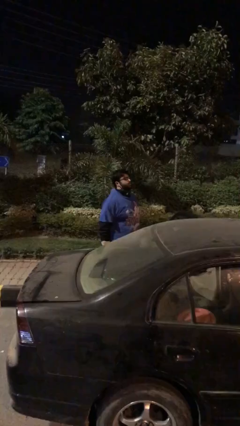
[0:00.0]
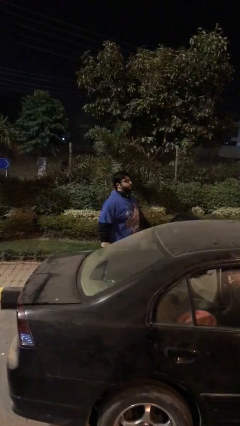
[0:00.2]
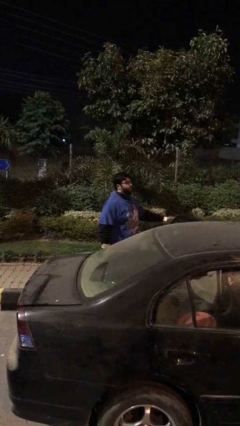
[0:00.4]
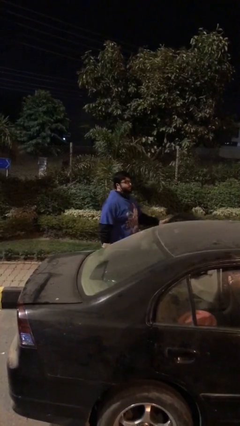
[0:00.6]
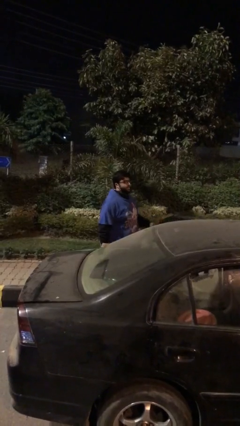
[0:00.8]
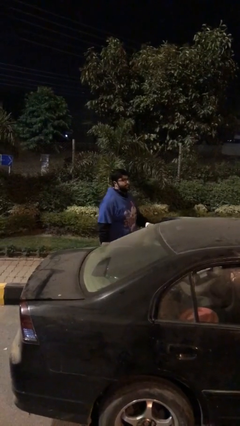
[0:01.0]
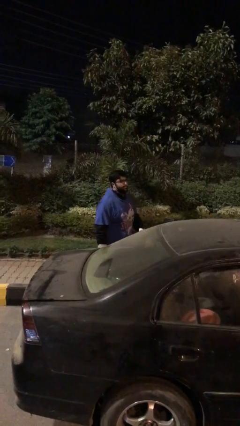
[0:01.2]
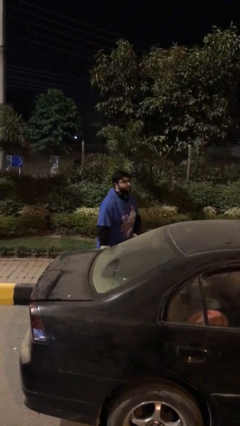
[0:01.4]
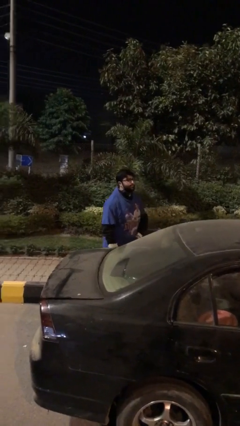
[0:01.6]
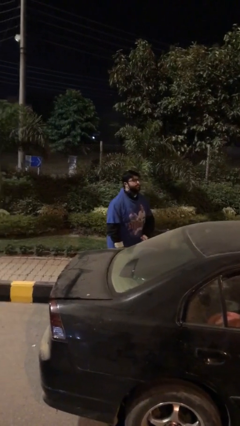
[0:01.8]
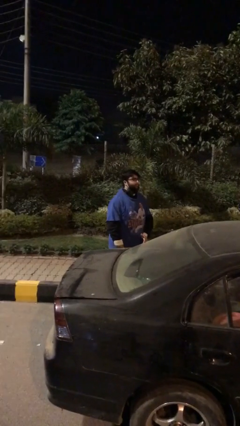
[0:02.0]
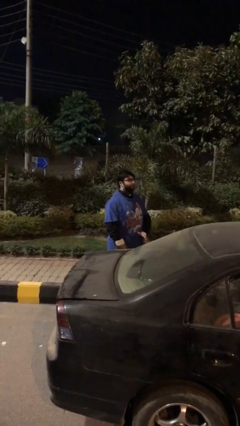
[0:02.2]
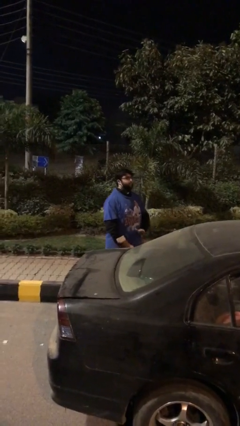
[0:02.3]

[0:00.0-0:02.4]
person closes car door

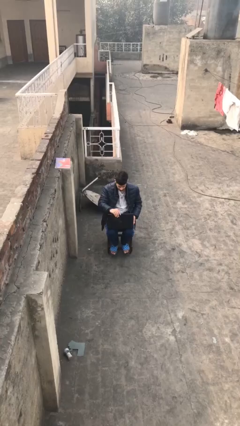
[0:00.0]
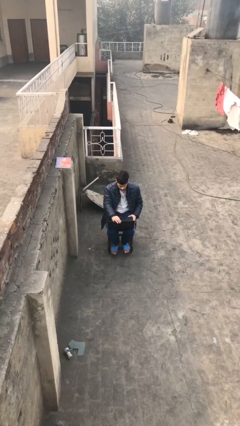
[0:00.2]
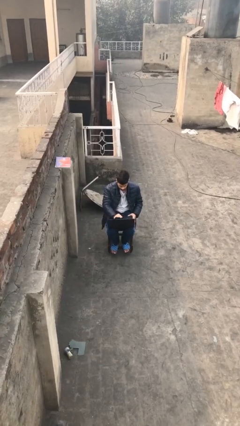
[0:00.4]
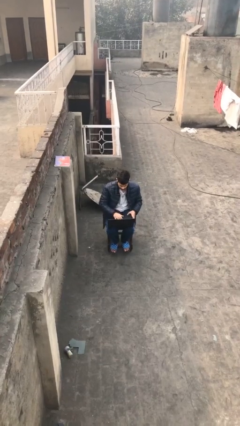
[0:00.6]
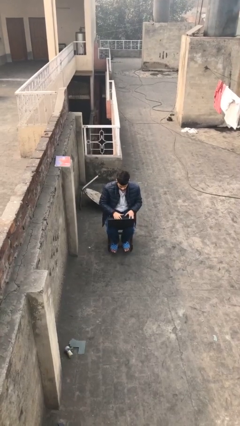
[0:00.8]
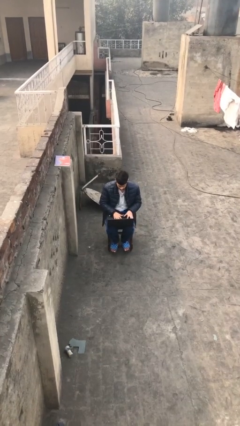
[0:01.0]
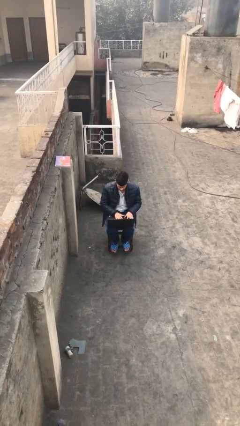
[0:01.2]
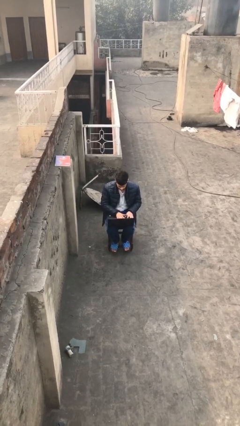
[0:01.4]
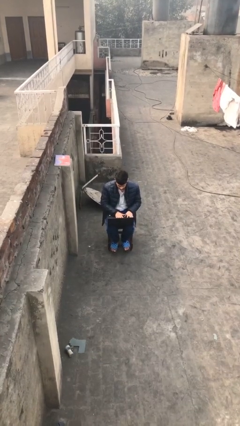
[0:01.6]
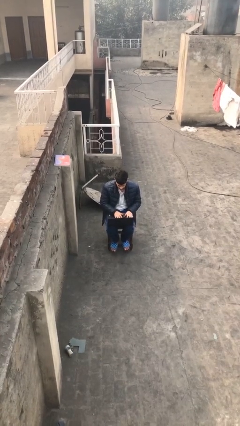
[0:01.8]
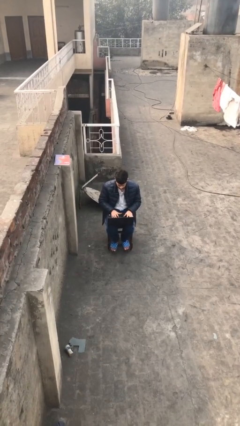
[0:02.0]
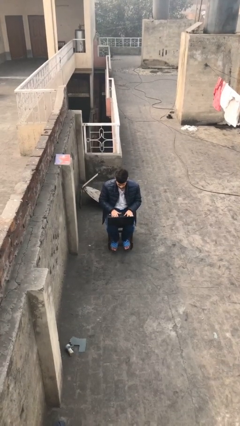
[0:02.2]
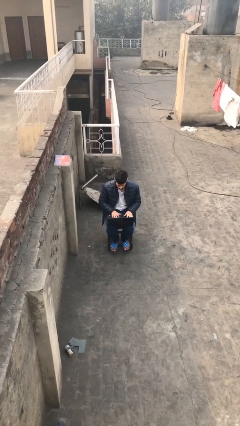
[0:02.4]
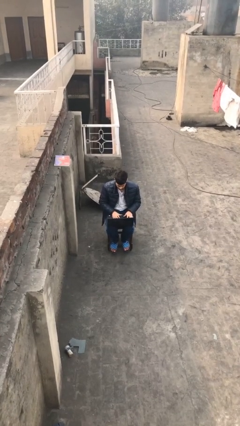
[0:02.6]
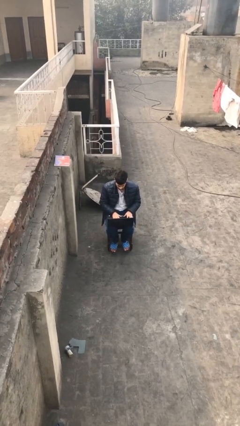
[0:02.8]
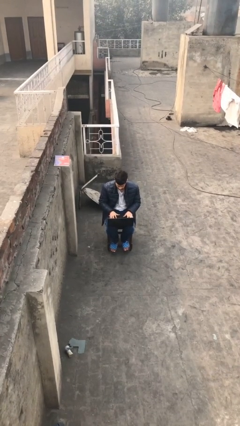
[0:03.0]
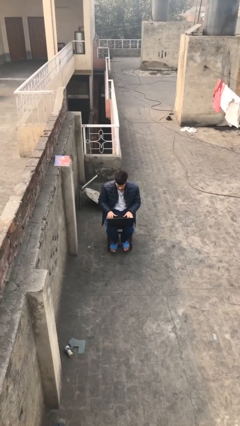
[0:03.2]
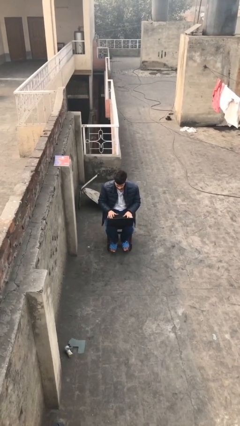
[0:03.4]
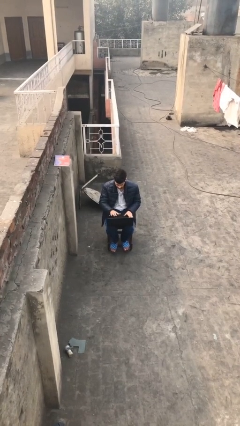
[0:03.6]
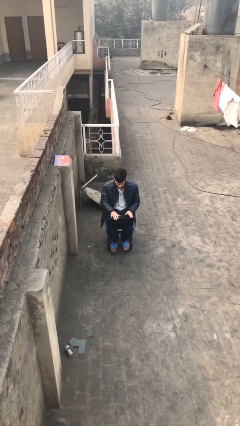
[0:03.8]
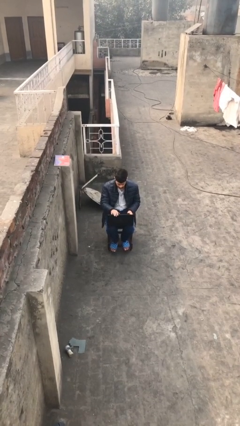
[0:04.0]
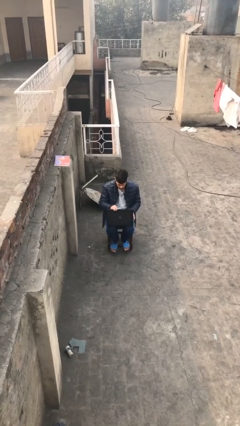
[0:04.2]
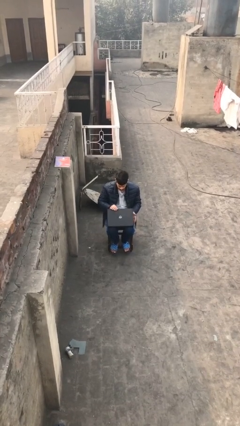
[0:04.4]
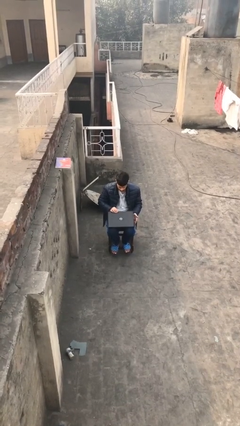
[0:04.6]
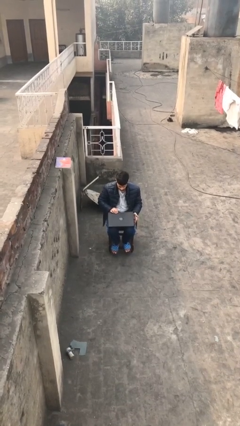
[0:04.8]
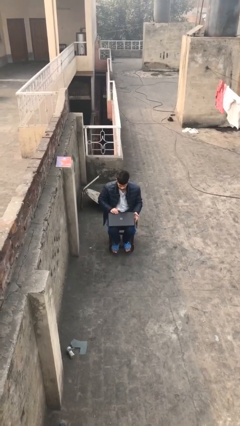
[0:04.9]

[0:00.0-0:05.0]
person interacts with laptop

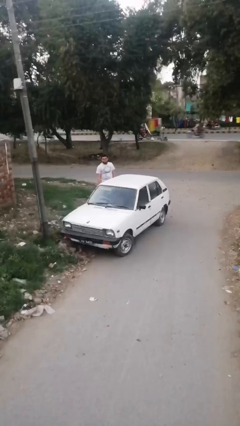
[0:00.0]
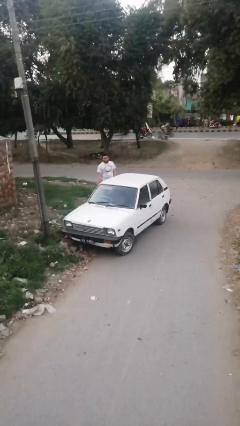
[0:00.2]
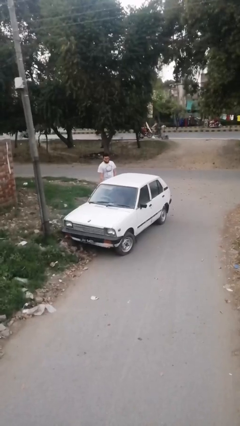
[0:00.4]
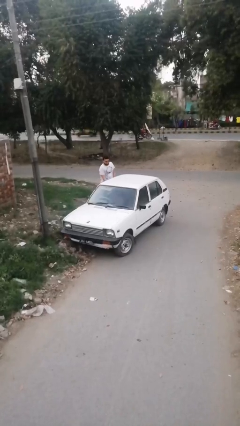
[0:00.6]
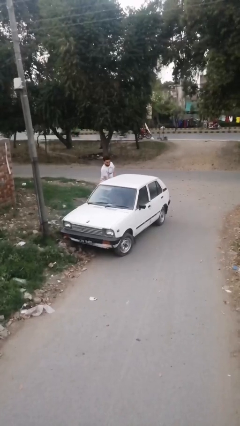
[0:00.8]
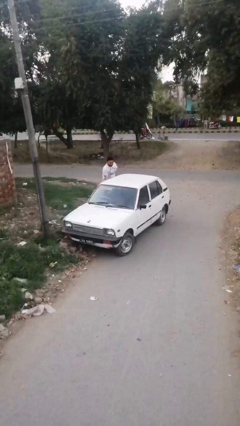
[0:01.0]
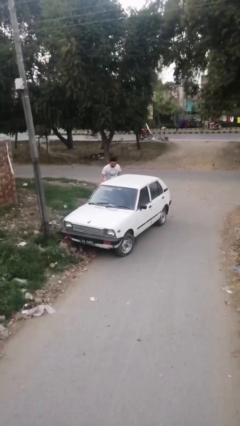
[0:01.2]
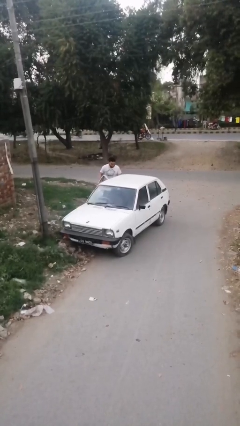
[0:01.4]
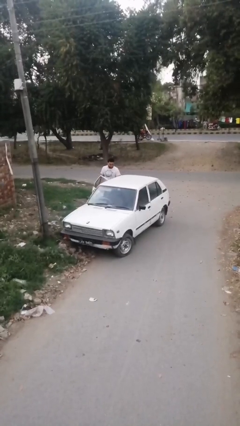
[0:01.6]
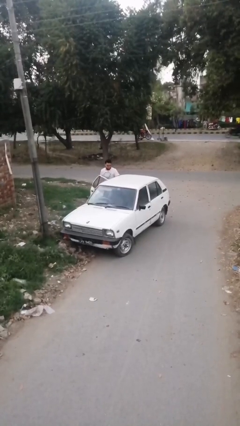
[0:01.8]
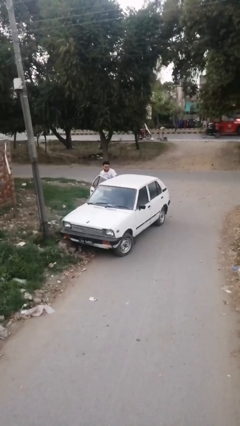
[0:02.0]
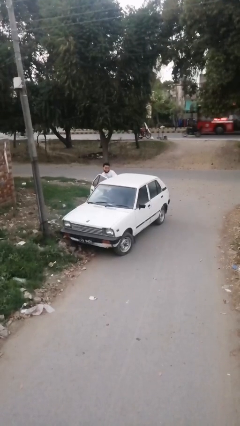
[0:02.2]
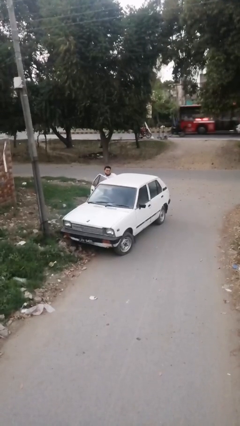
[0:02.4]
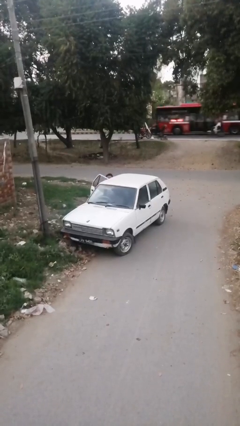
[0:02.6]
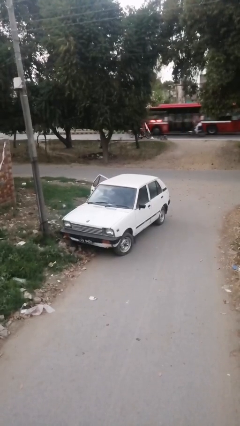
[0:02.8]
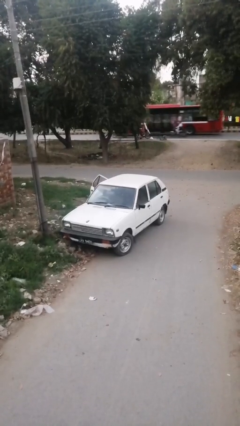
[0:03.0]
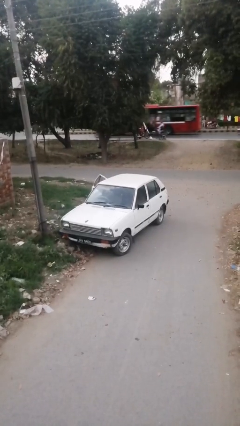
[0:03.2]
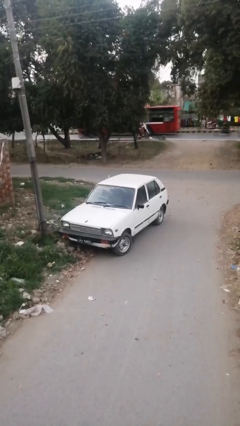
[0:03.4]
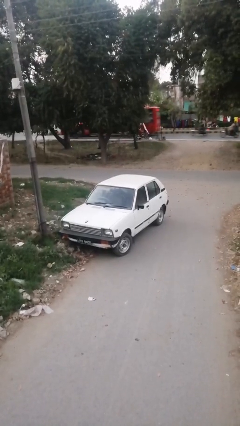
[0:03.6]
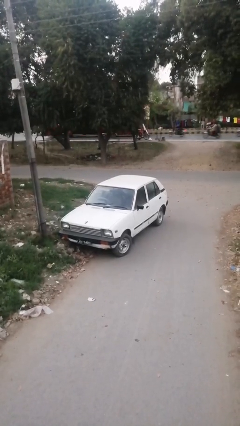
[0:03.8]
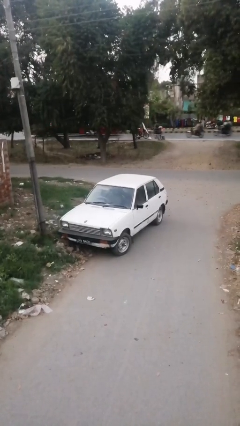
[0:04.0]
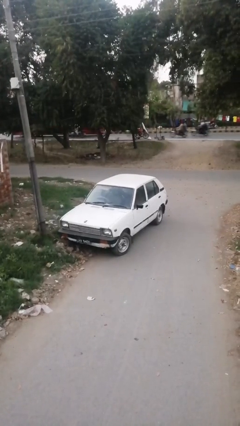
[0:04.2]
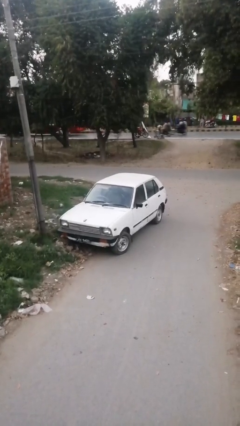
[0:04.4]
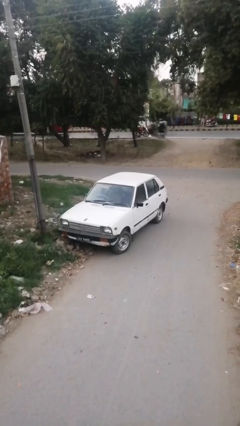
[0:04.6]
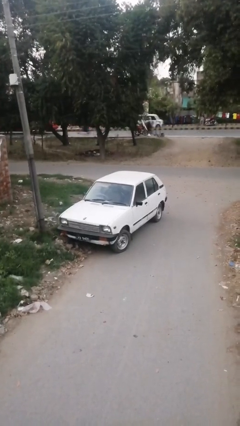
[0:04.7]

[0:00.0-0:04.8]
car picks up person

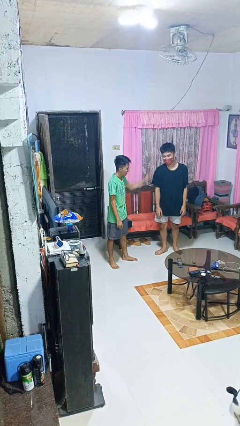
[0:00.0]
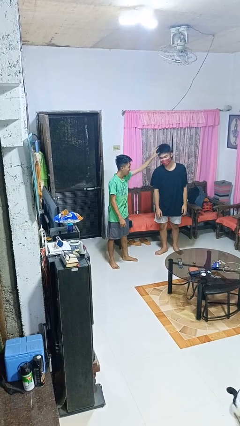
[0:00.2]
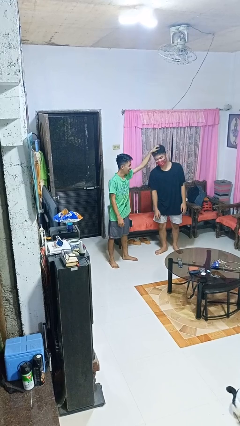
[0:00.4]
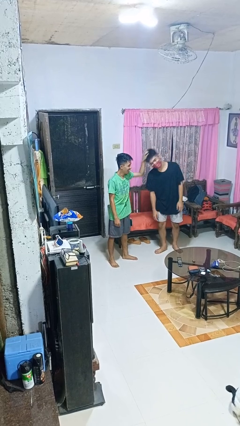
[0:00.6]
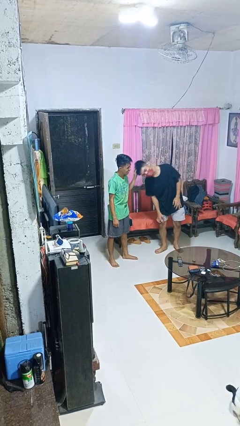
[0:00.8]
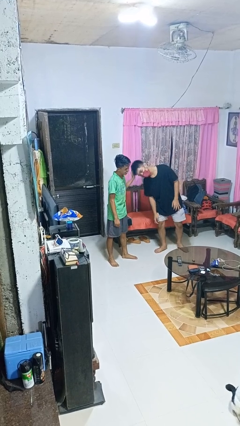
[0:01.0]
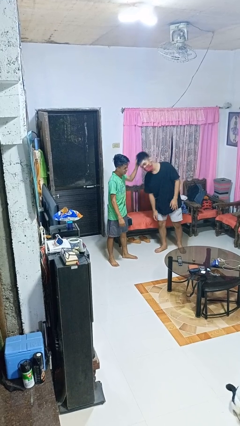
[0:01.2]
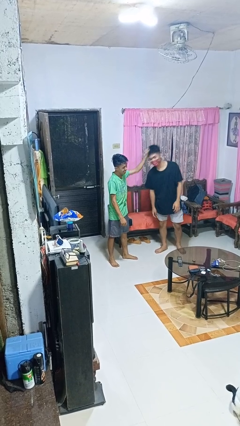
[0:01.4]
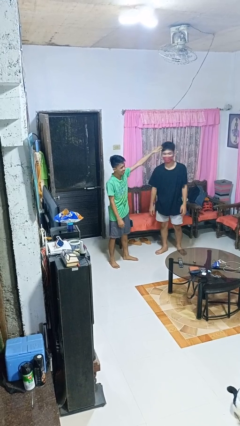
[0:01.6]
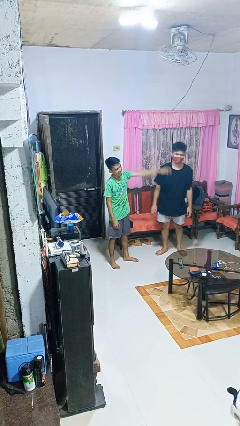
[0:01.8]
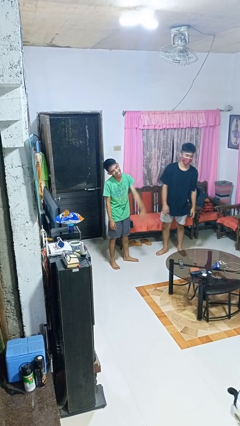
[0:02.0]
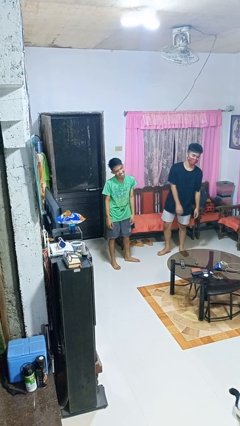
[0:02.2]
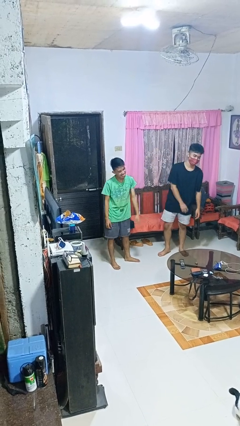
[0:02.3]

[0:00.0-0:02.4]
person grabs person by hair

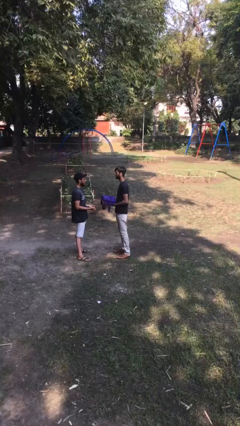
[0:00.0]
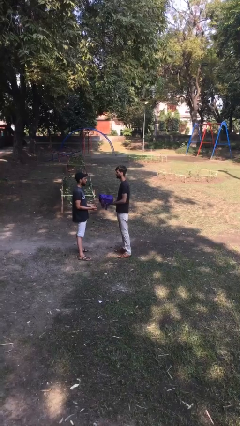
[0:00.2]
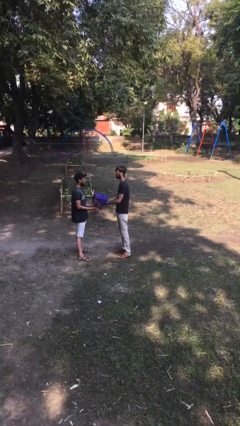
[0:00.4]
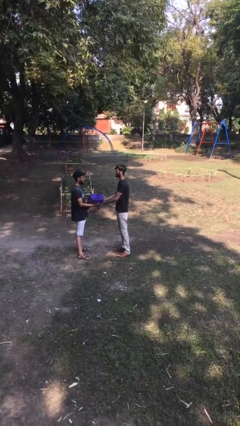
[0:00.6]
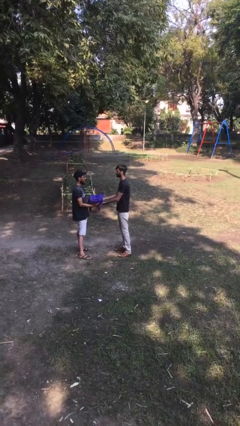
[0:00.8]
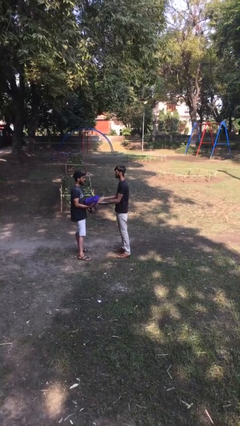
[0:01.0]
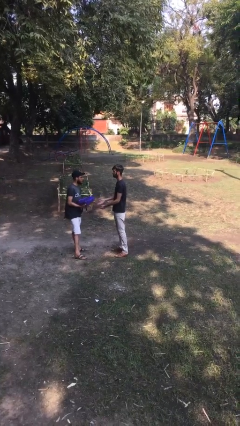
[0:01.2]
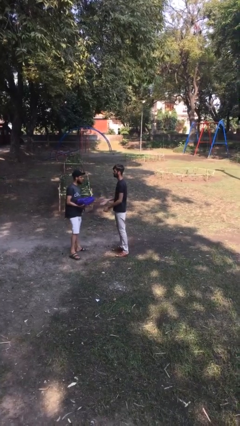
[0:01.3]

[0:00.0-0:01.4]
person transfers object to person

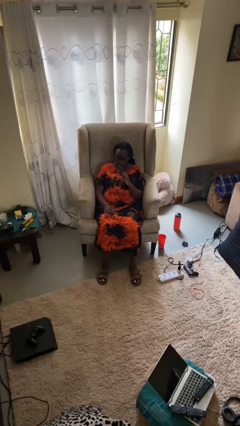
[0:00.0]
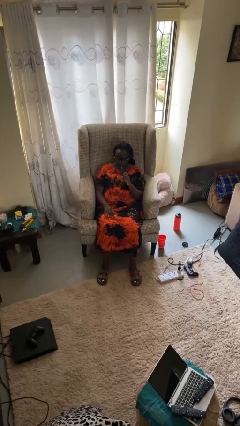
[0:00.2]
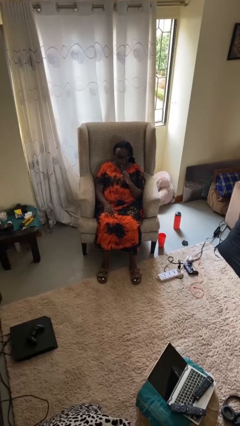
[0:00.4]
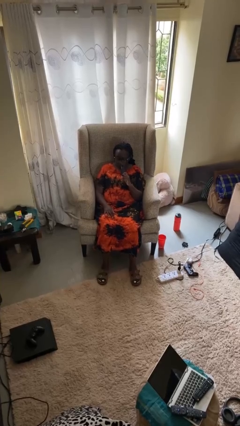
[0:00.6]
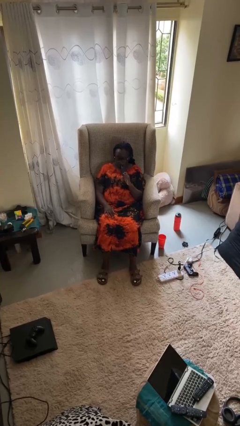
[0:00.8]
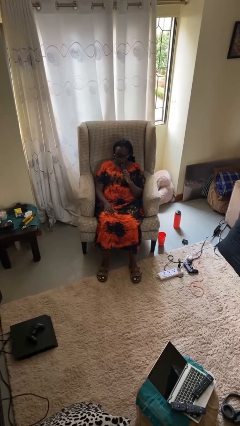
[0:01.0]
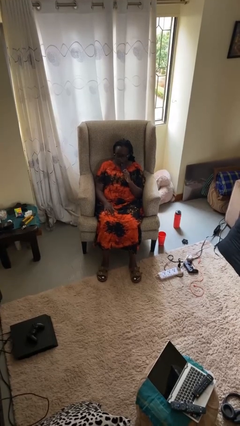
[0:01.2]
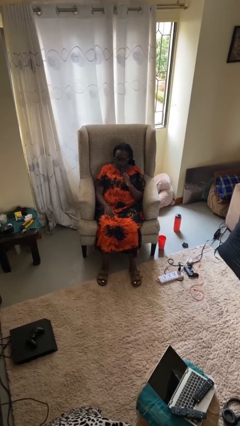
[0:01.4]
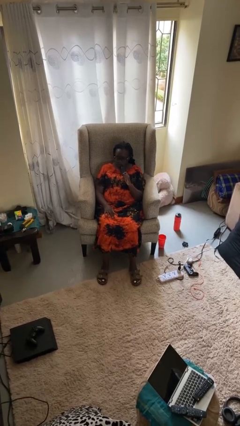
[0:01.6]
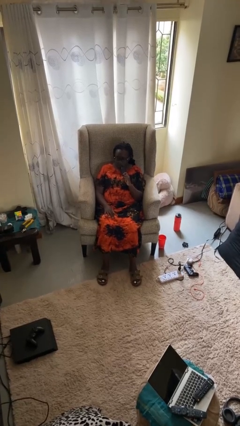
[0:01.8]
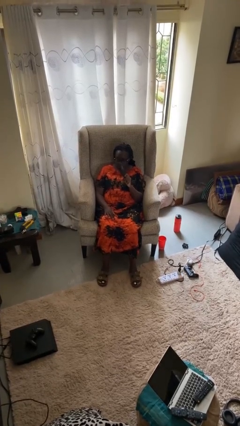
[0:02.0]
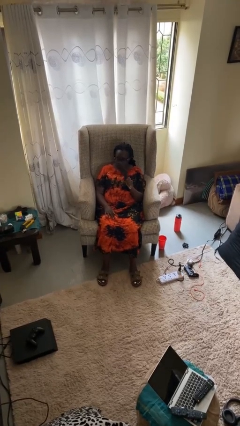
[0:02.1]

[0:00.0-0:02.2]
person vapes
